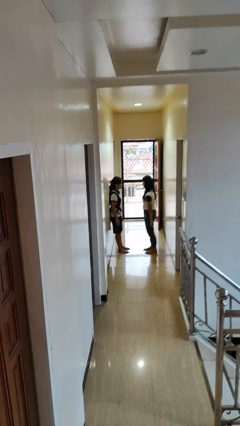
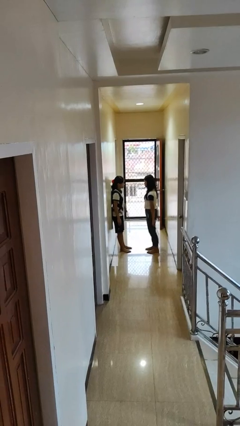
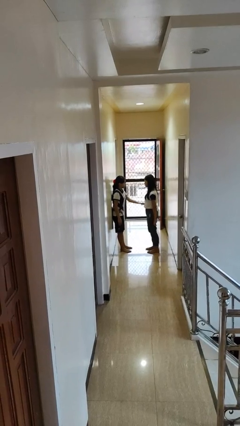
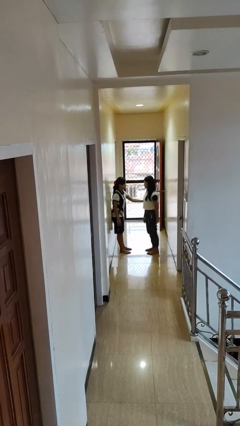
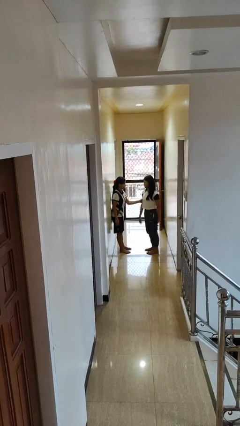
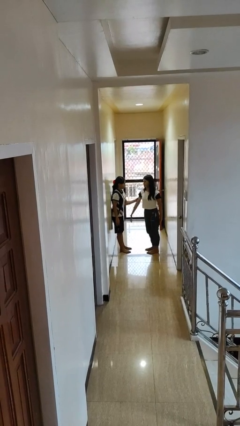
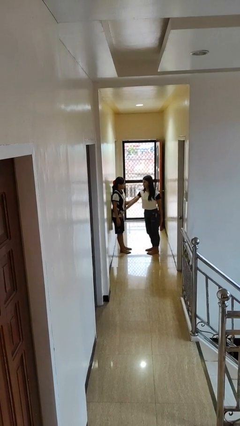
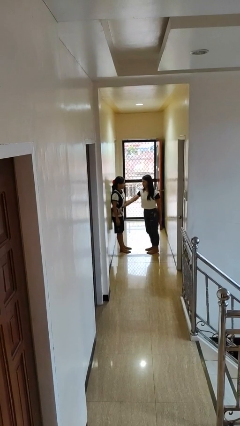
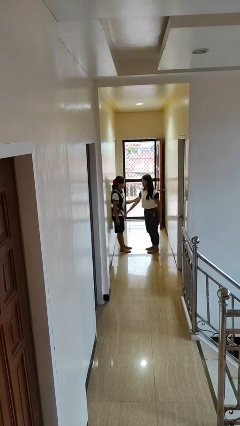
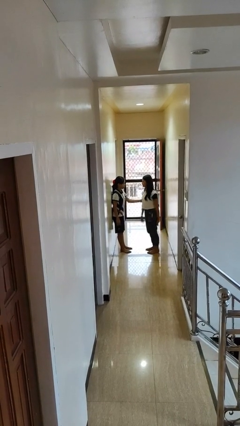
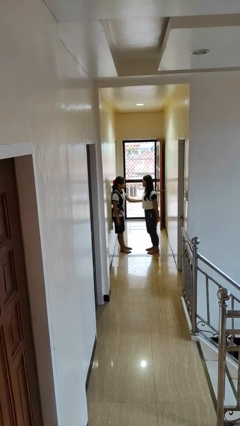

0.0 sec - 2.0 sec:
person grabs person by bicep

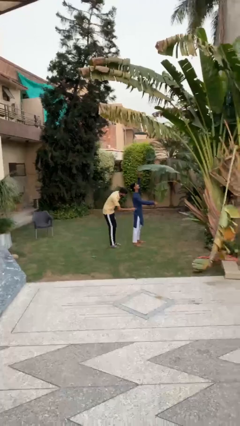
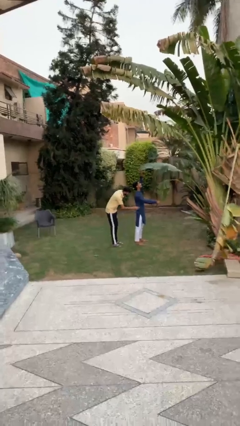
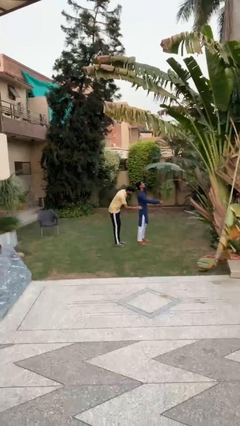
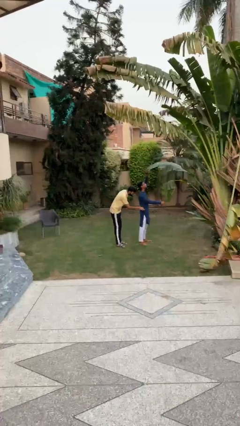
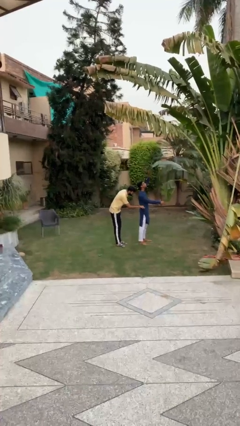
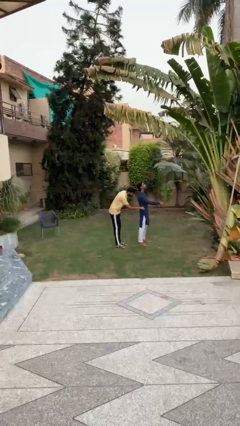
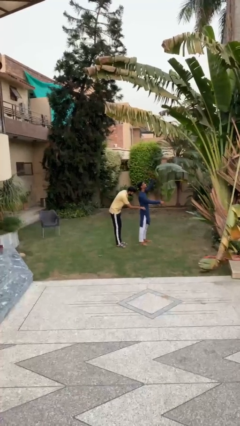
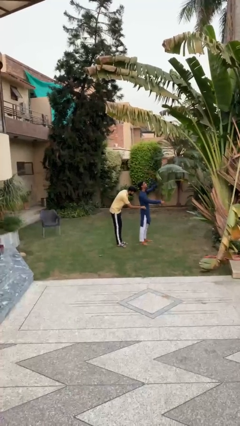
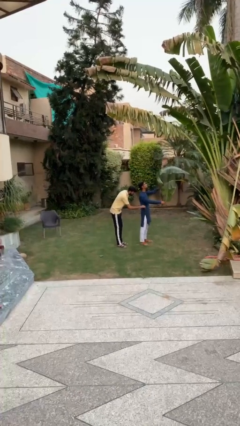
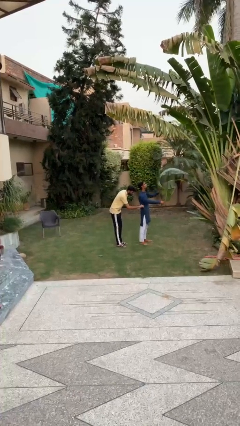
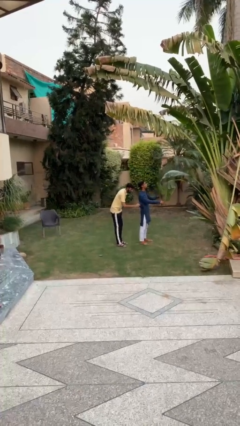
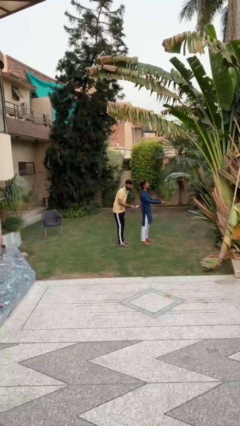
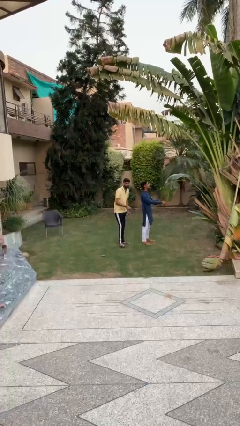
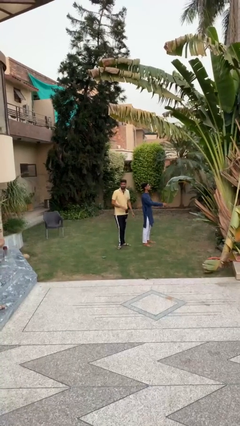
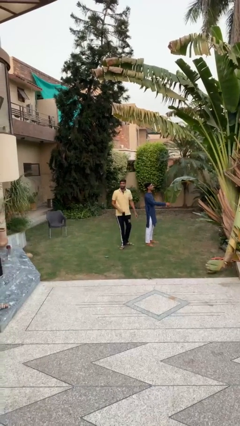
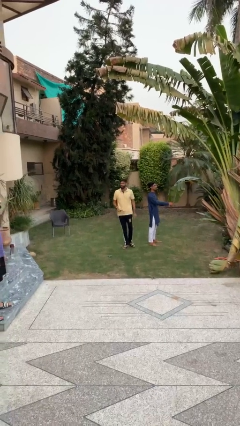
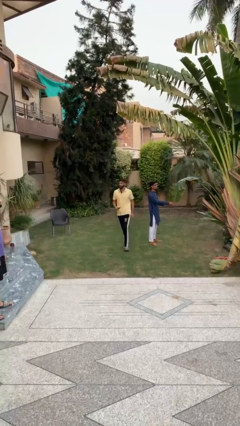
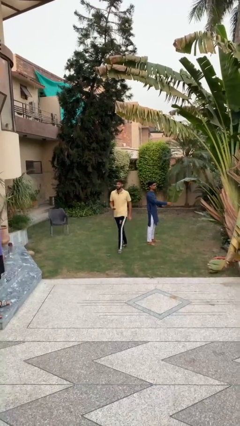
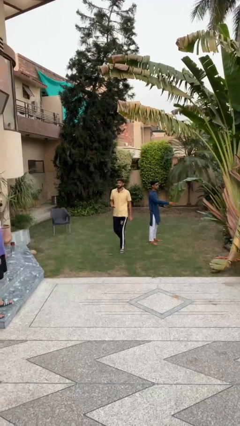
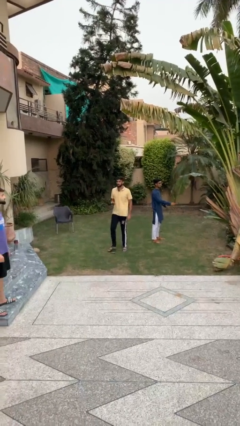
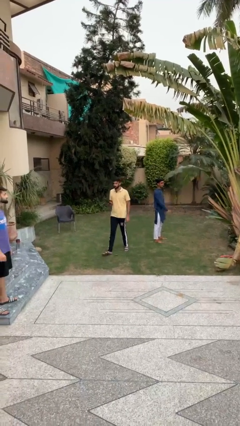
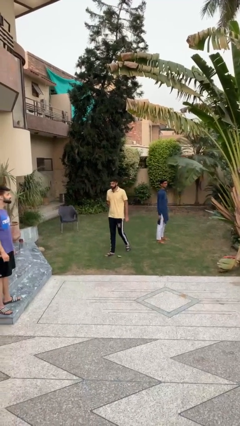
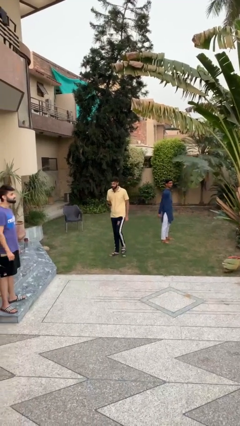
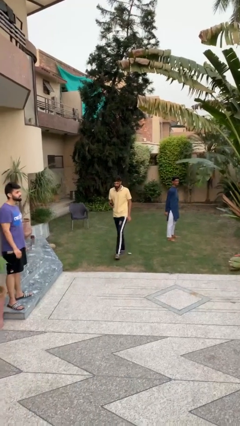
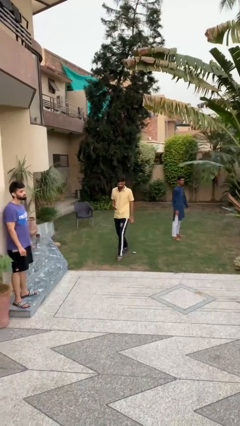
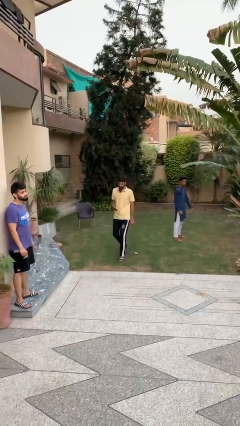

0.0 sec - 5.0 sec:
person steals object from person

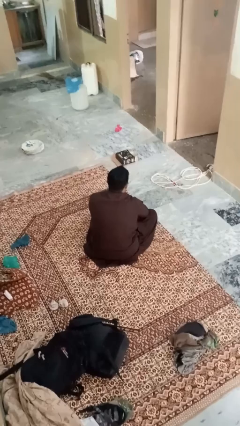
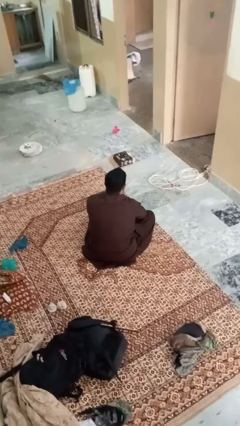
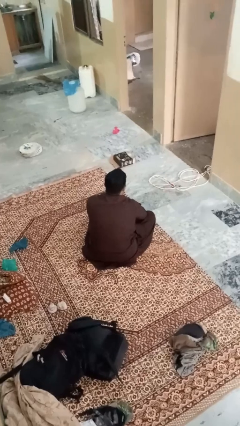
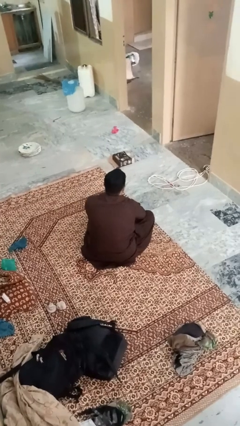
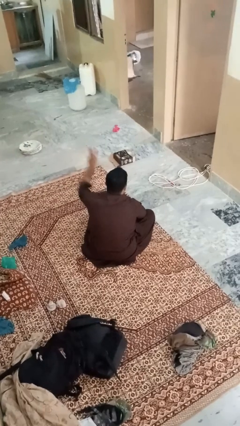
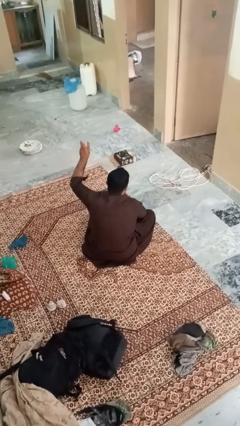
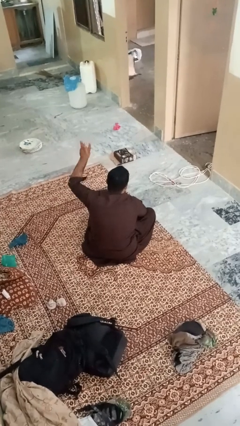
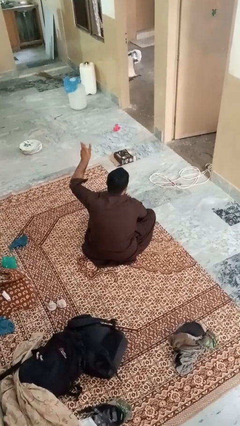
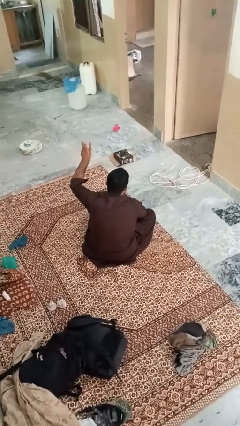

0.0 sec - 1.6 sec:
person gestures number three

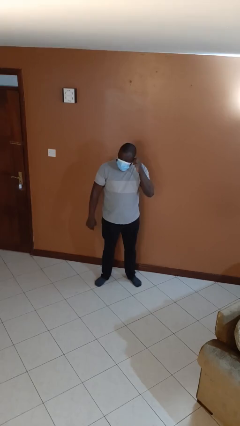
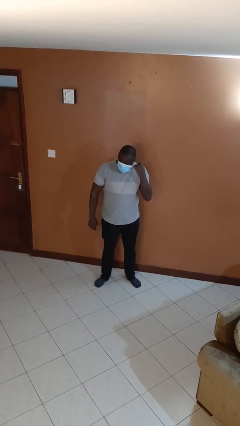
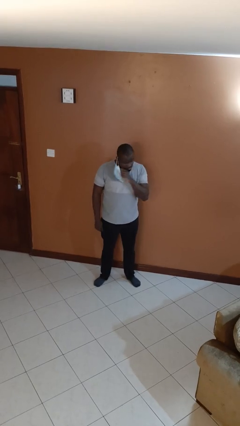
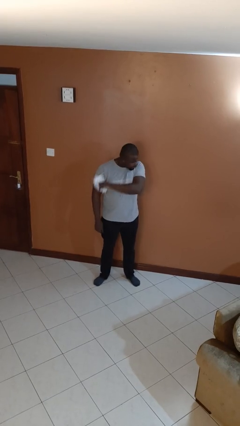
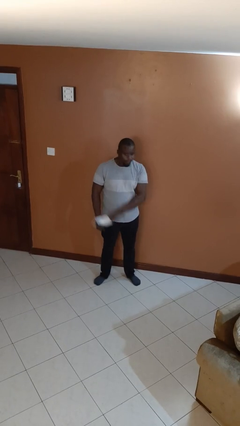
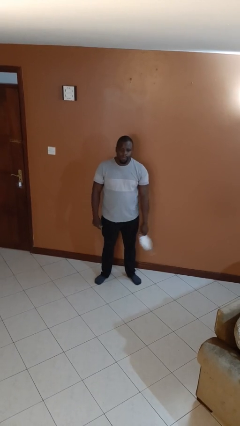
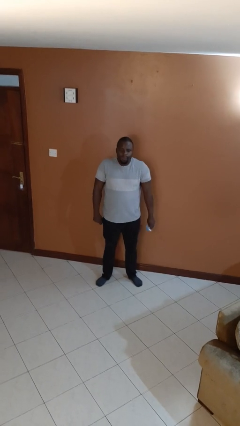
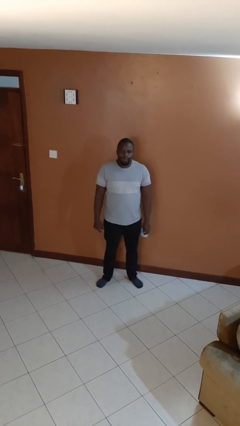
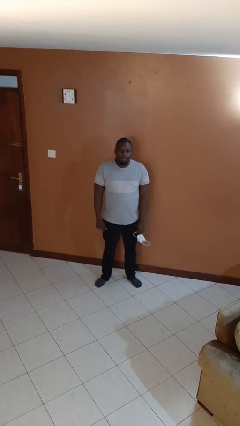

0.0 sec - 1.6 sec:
person takes off facemask

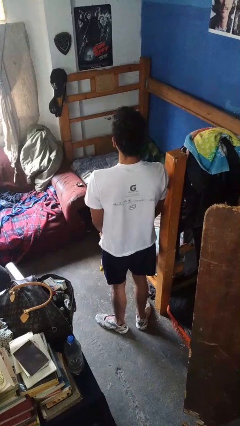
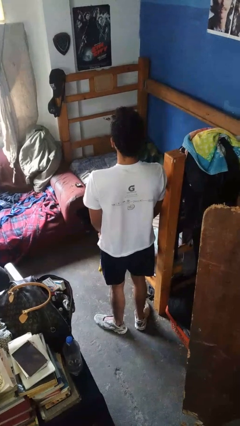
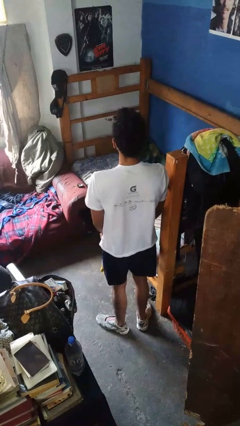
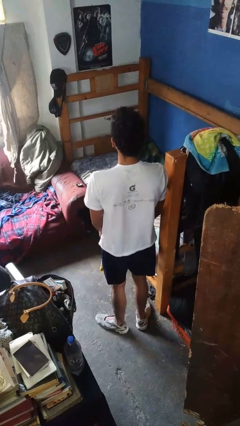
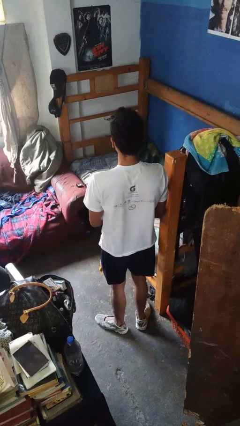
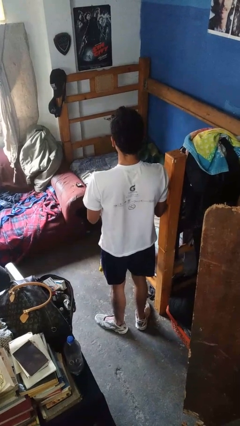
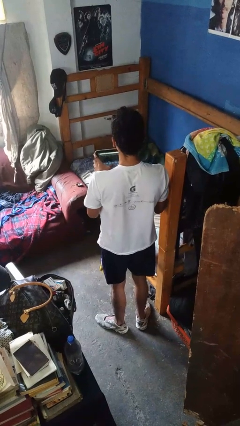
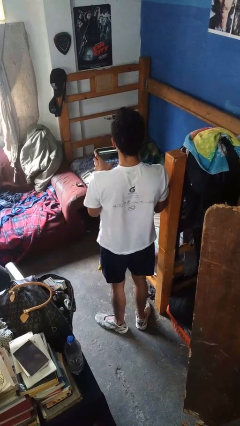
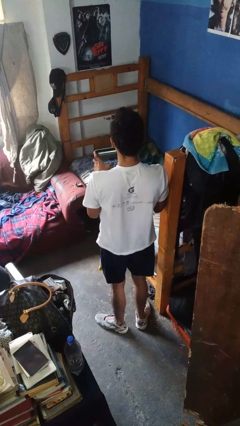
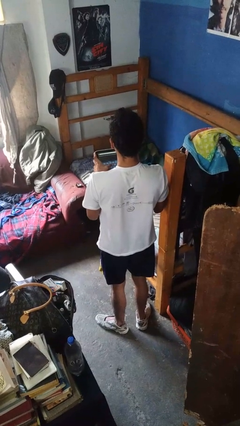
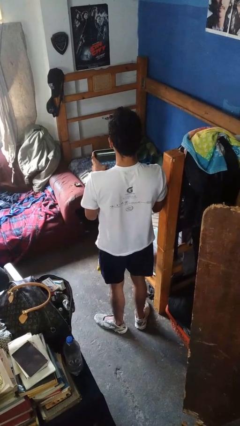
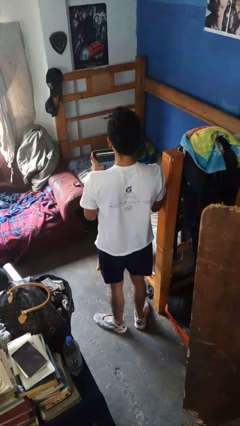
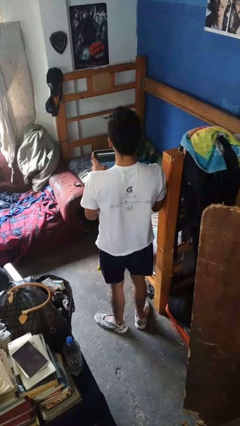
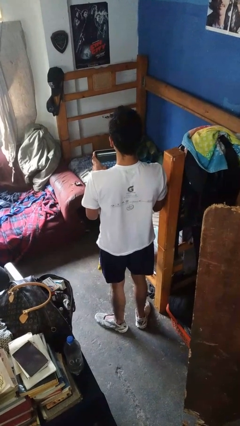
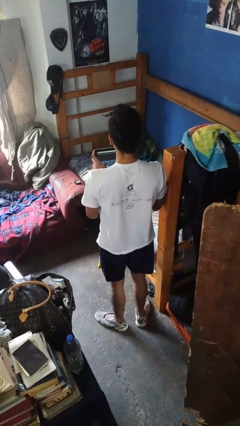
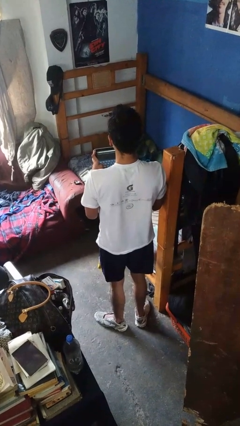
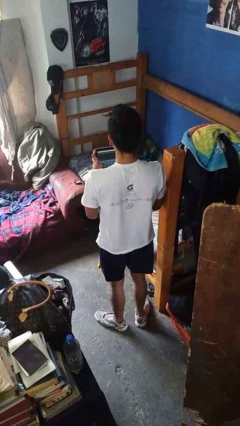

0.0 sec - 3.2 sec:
person interacts with tablet

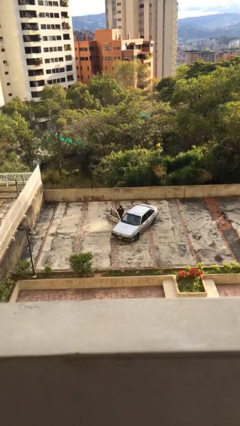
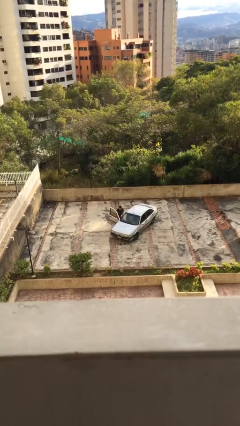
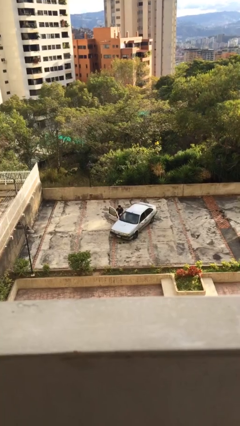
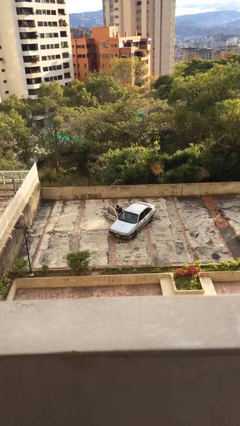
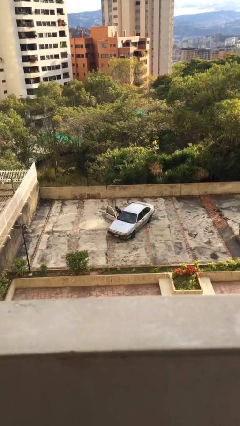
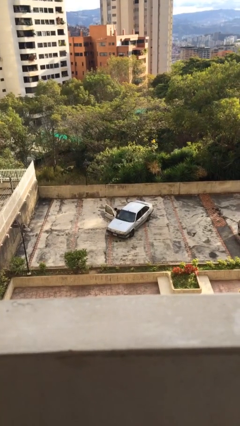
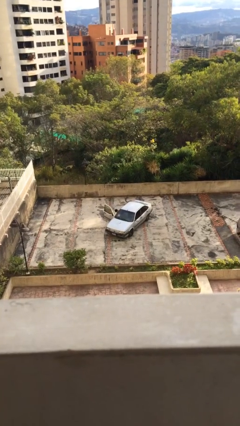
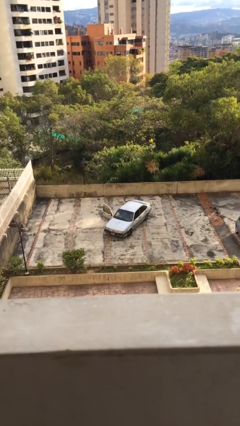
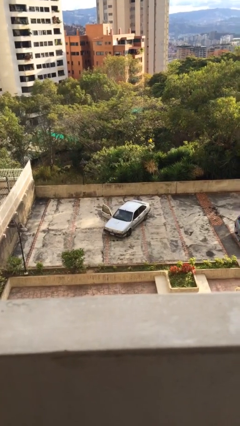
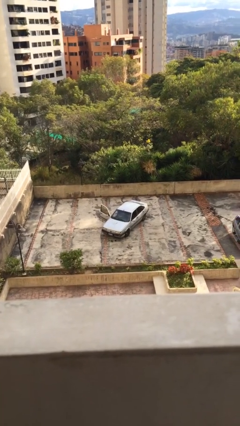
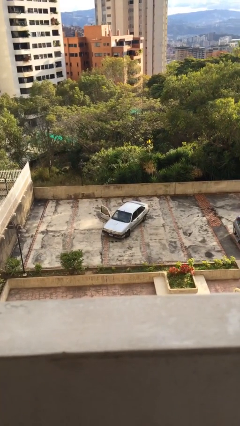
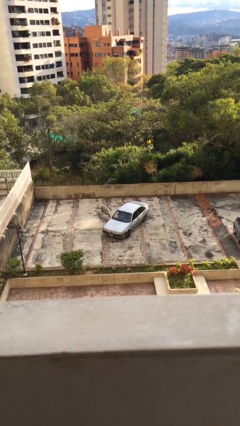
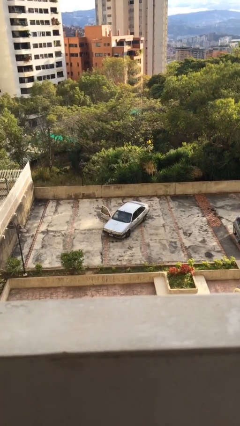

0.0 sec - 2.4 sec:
person enters car

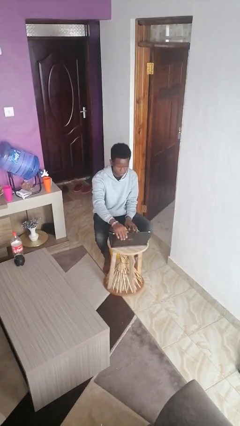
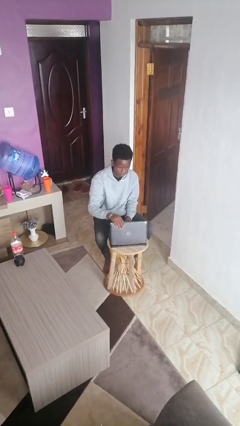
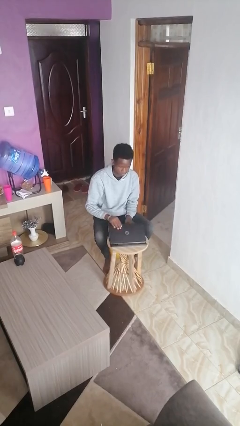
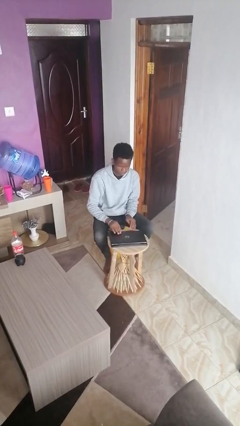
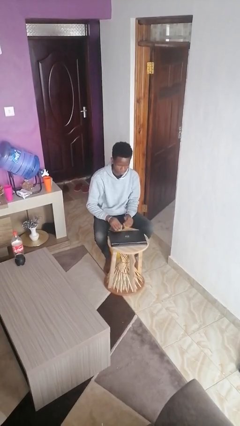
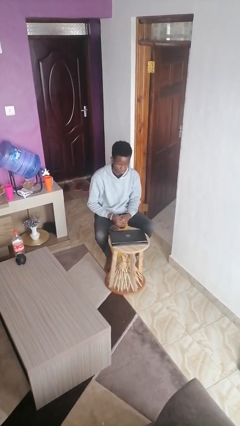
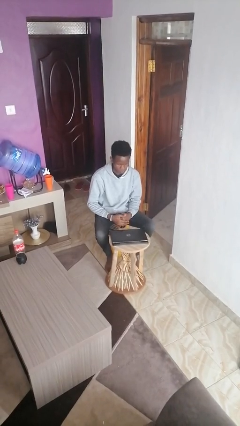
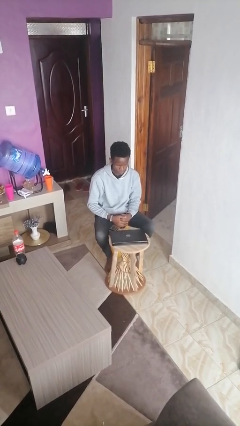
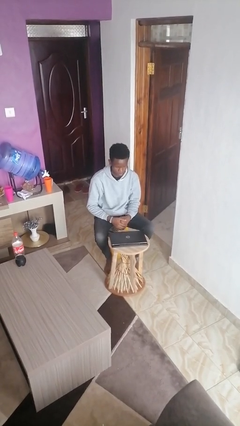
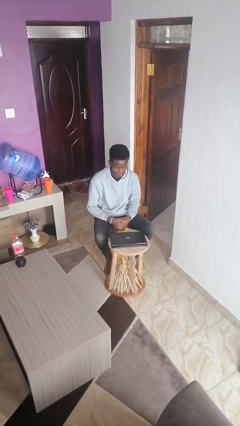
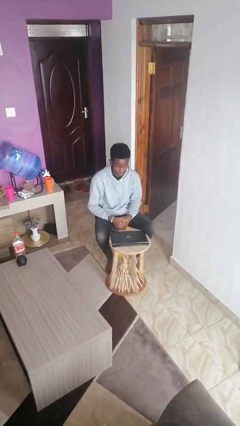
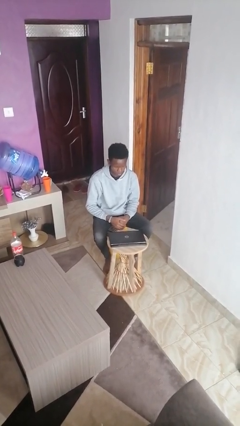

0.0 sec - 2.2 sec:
person closes laptop
